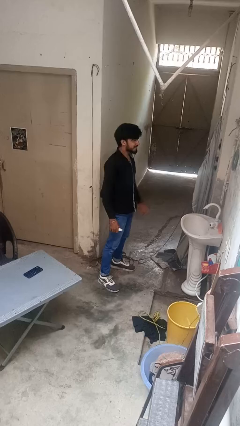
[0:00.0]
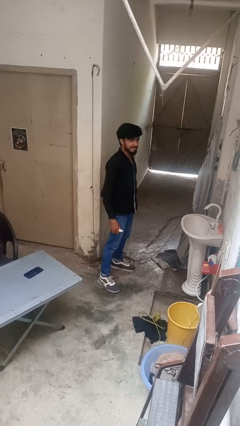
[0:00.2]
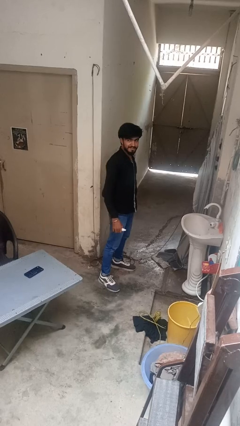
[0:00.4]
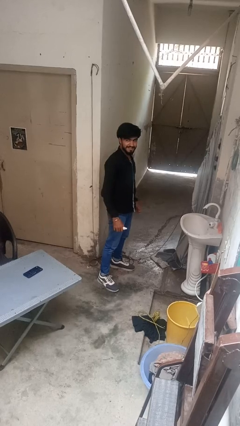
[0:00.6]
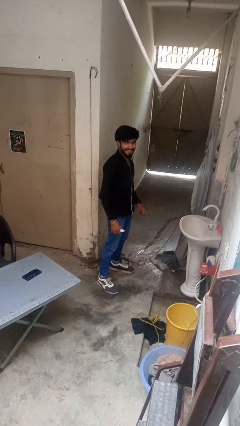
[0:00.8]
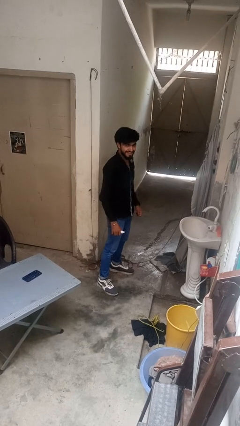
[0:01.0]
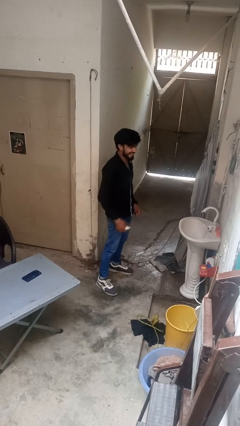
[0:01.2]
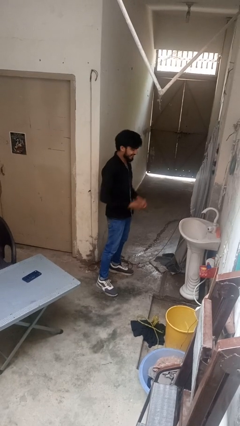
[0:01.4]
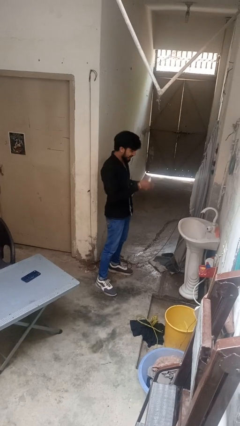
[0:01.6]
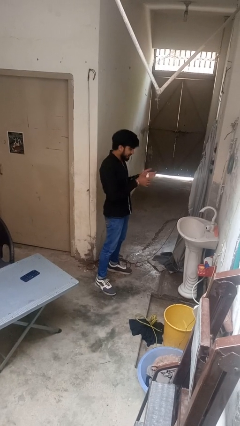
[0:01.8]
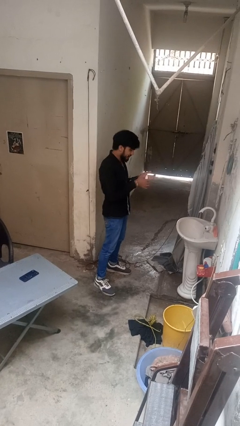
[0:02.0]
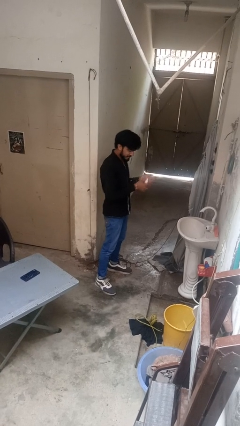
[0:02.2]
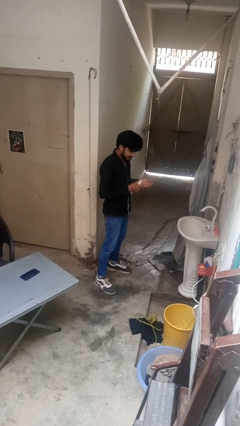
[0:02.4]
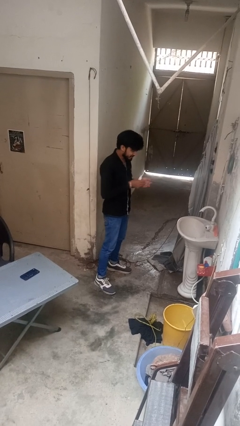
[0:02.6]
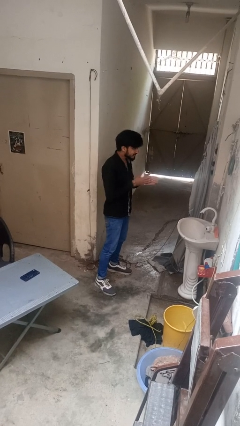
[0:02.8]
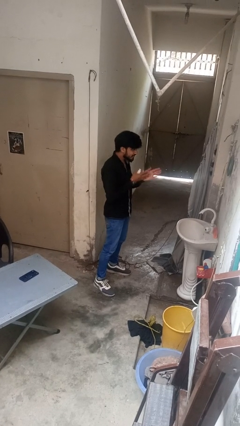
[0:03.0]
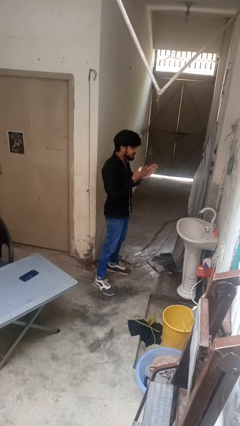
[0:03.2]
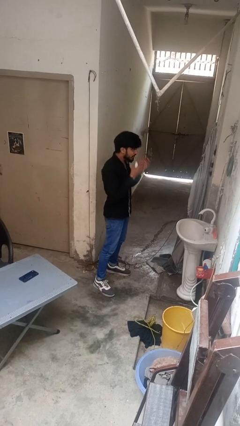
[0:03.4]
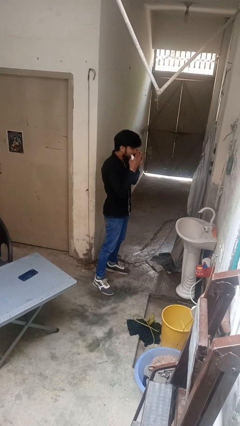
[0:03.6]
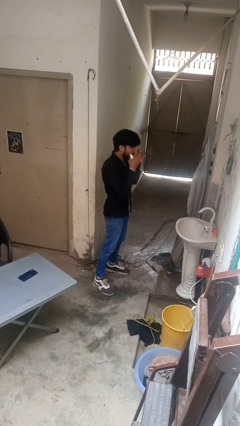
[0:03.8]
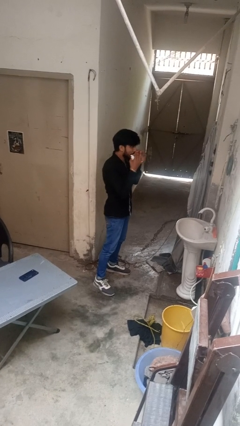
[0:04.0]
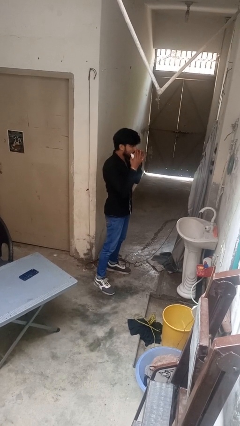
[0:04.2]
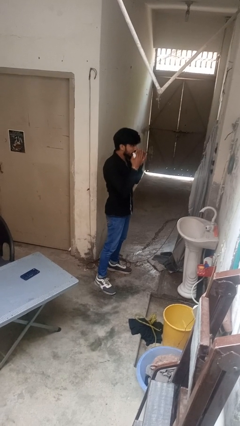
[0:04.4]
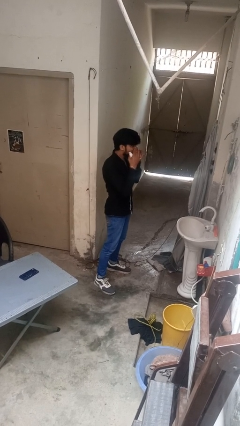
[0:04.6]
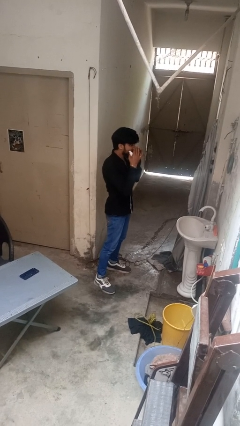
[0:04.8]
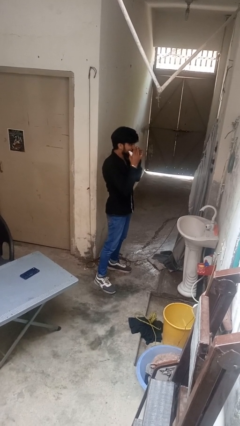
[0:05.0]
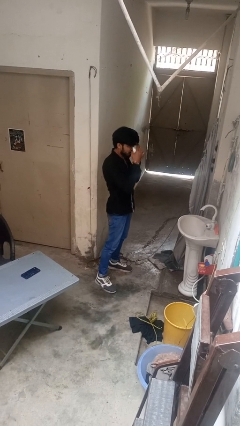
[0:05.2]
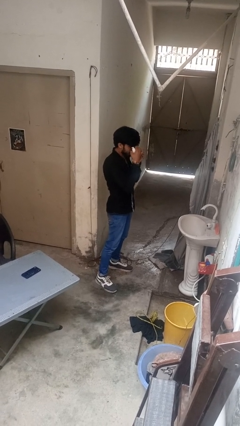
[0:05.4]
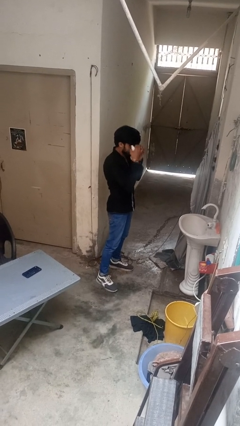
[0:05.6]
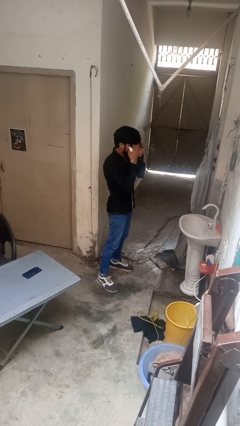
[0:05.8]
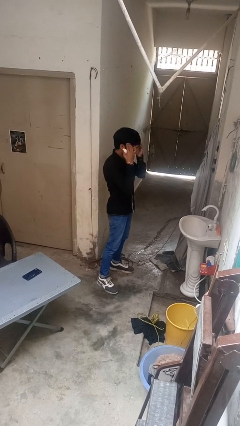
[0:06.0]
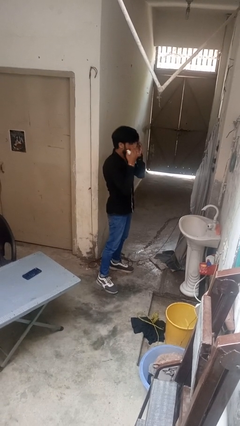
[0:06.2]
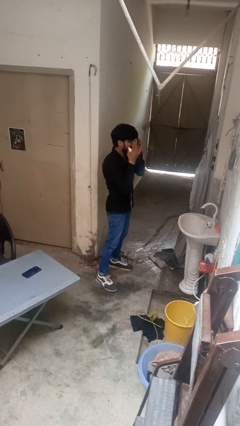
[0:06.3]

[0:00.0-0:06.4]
person applies foundation makeup

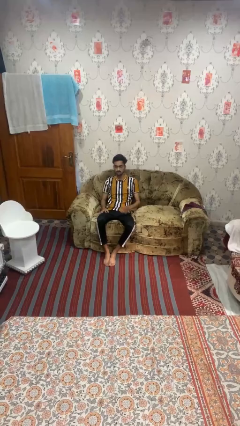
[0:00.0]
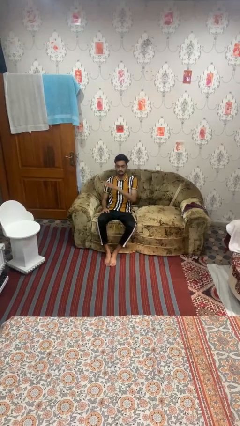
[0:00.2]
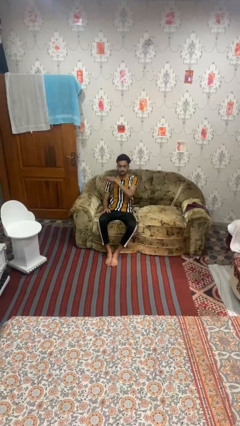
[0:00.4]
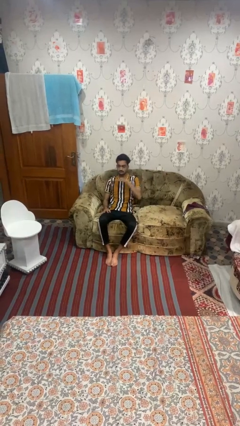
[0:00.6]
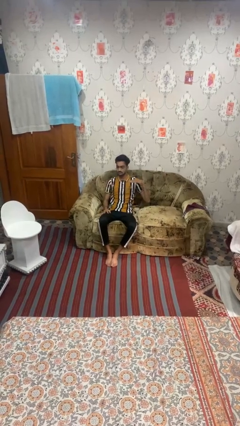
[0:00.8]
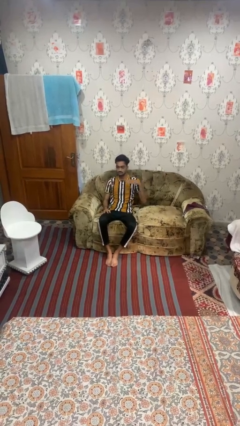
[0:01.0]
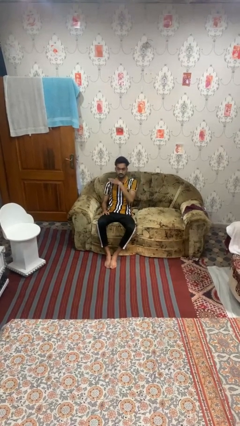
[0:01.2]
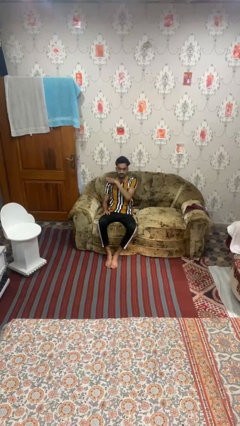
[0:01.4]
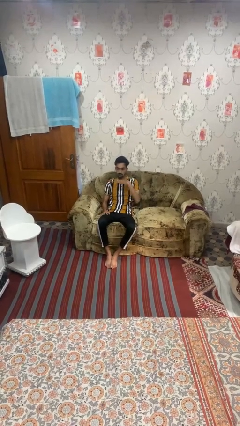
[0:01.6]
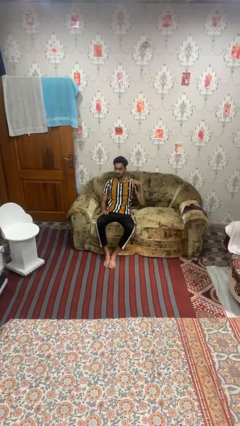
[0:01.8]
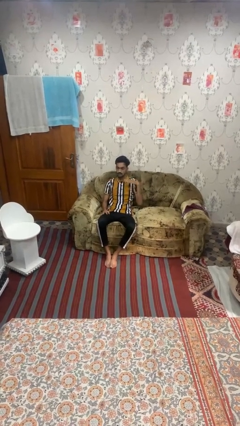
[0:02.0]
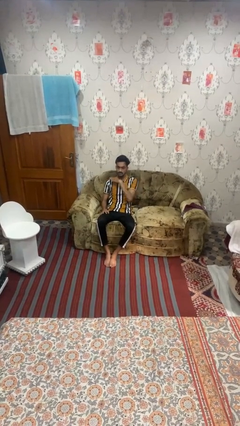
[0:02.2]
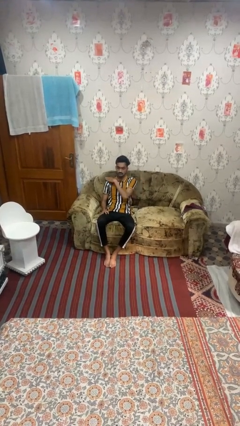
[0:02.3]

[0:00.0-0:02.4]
person gestures cut

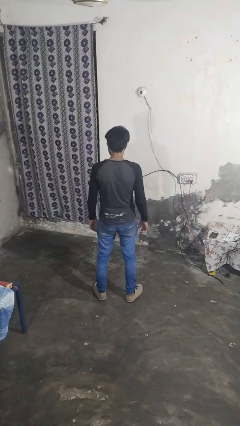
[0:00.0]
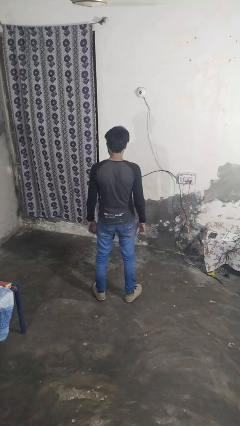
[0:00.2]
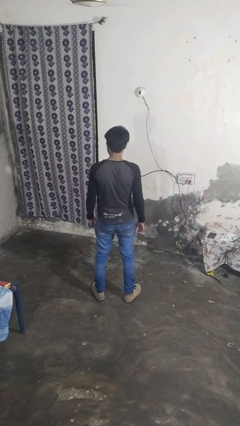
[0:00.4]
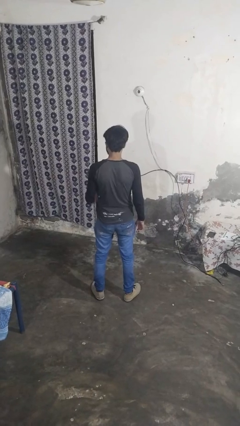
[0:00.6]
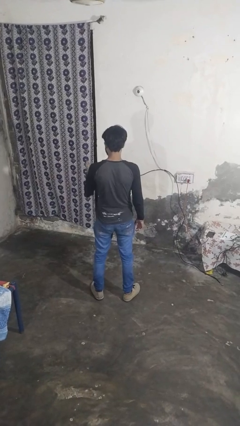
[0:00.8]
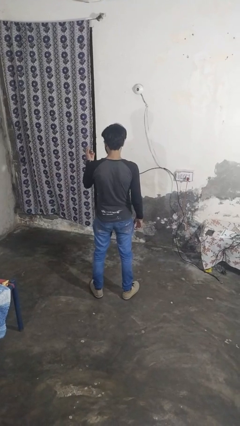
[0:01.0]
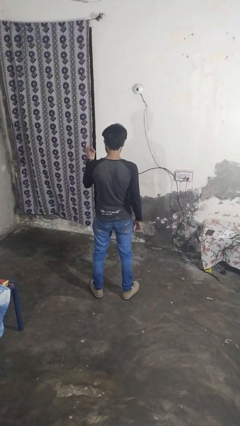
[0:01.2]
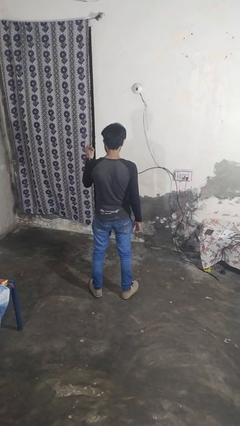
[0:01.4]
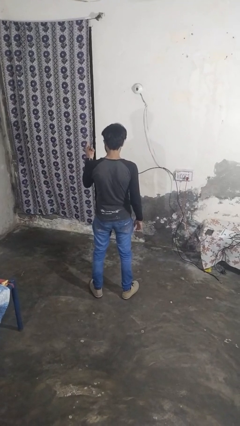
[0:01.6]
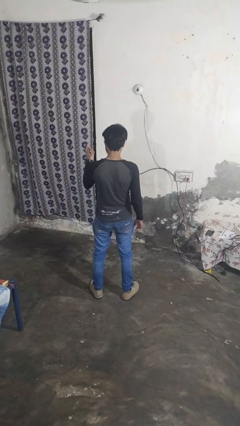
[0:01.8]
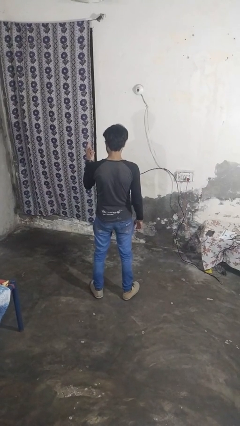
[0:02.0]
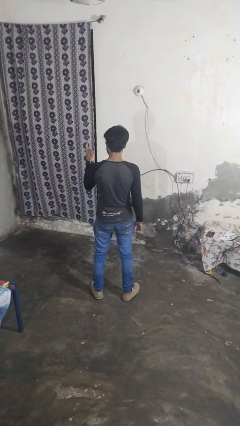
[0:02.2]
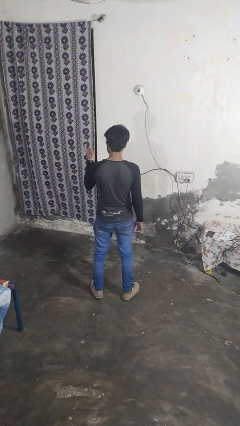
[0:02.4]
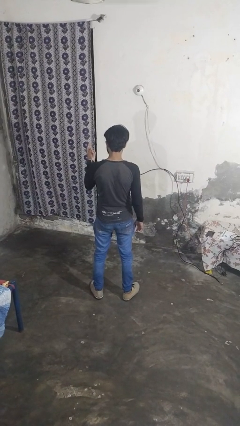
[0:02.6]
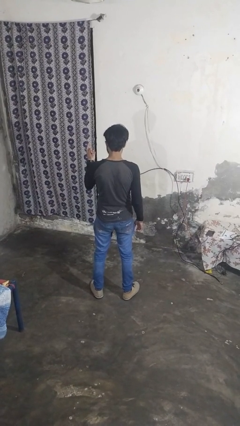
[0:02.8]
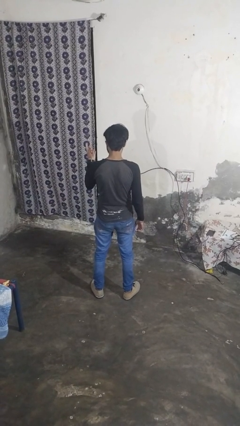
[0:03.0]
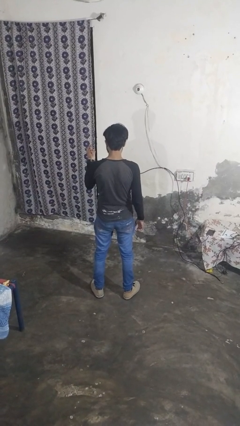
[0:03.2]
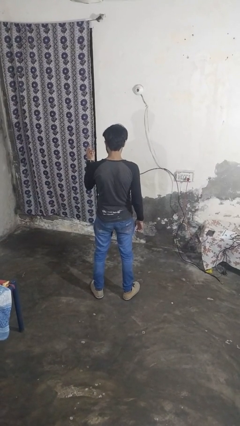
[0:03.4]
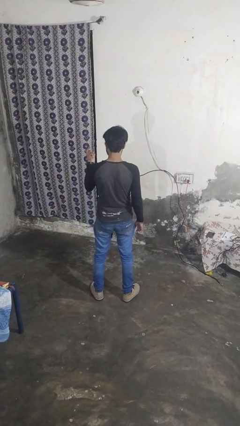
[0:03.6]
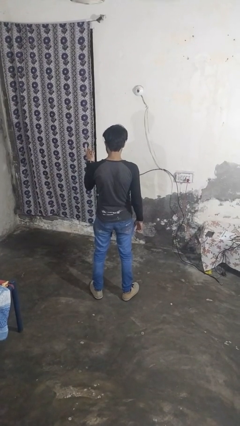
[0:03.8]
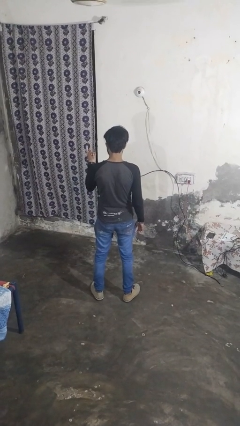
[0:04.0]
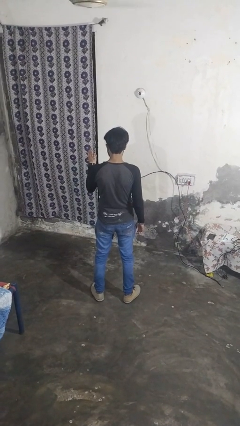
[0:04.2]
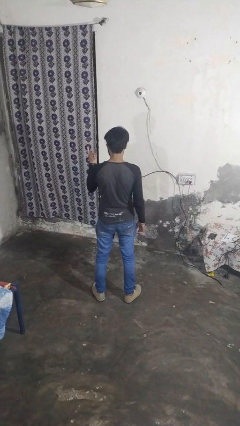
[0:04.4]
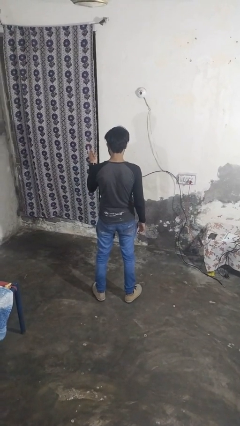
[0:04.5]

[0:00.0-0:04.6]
person gestures come here

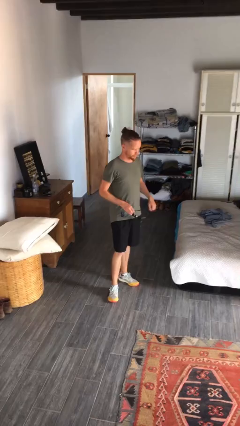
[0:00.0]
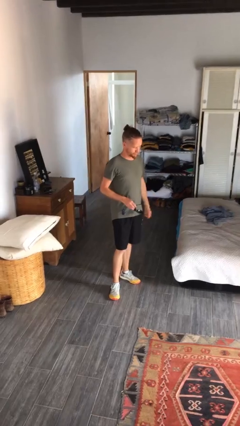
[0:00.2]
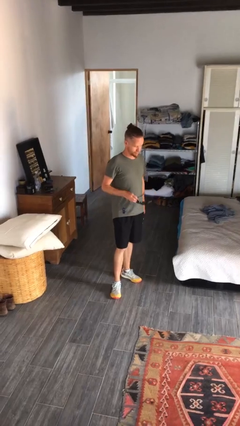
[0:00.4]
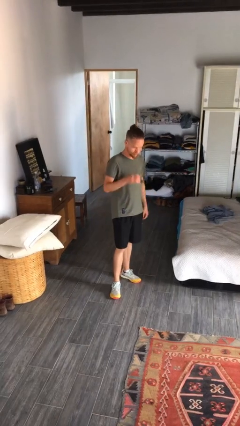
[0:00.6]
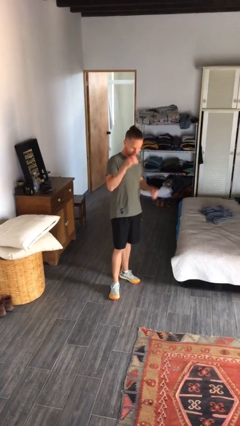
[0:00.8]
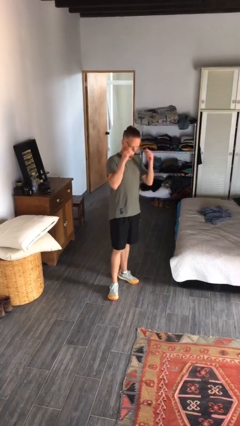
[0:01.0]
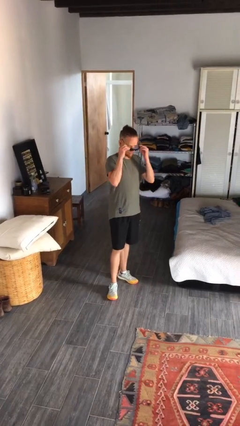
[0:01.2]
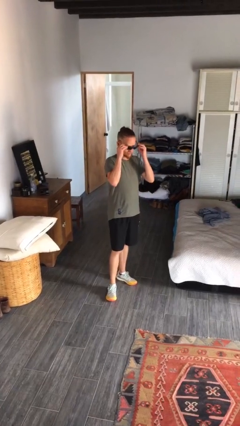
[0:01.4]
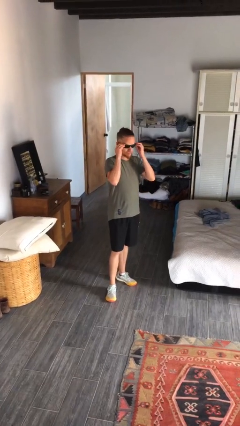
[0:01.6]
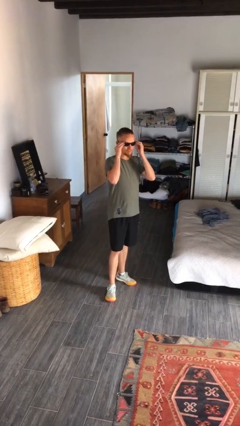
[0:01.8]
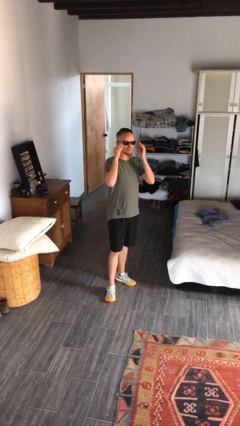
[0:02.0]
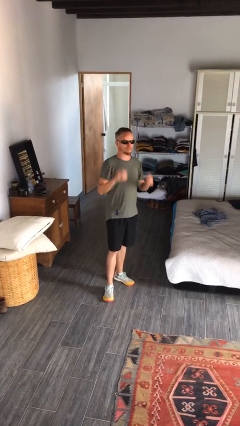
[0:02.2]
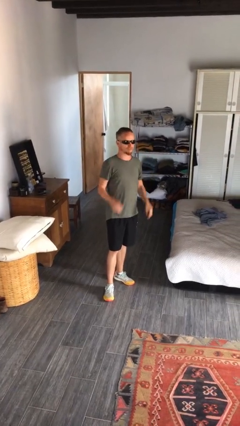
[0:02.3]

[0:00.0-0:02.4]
person puts on sunglasses

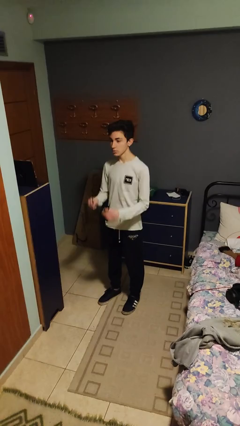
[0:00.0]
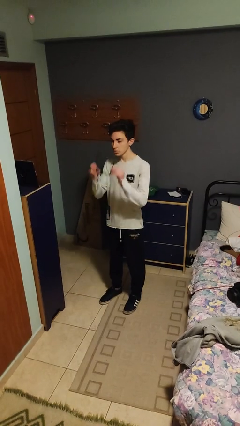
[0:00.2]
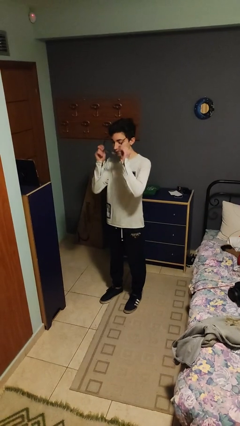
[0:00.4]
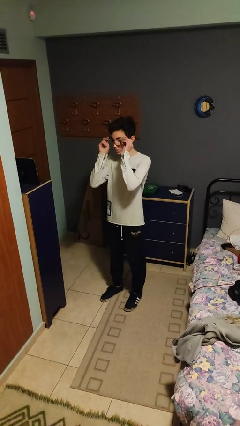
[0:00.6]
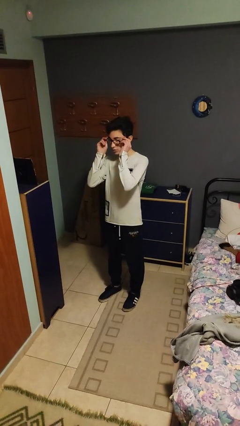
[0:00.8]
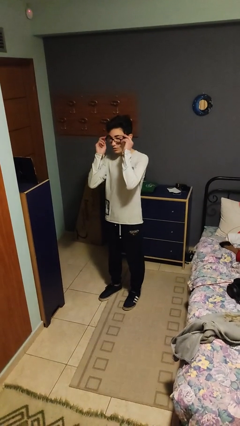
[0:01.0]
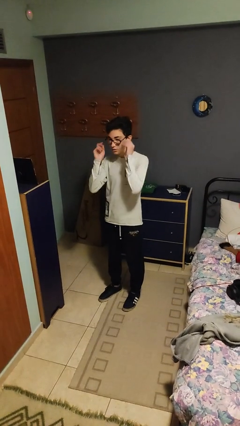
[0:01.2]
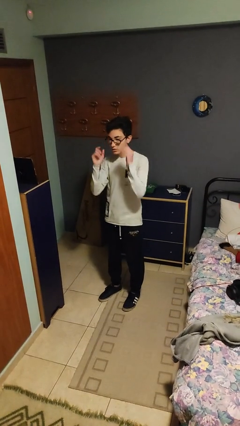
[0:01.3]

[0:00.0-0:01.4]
person puts on glasses
